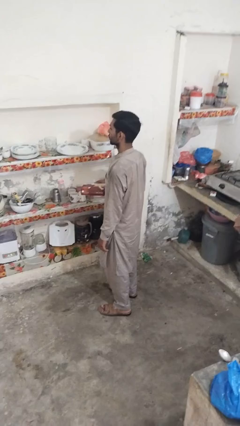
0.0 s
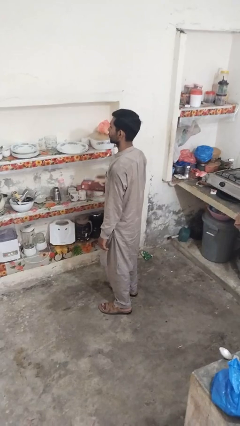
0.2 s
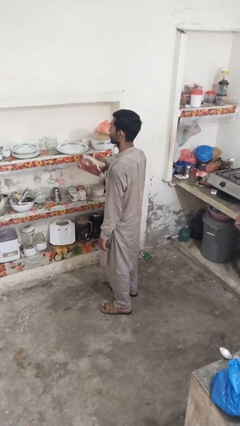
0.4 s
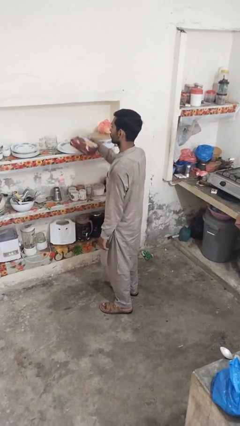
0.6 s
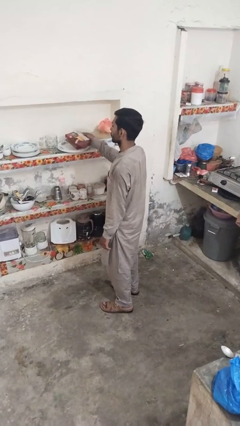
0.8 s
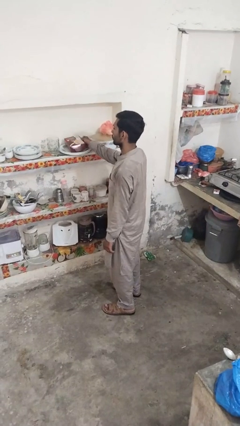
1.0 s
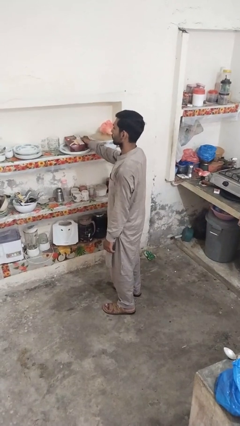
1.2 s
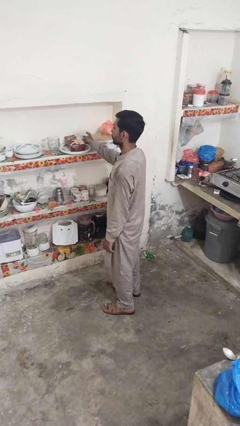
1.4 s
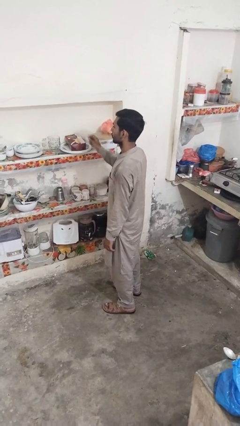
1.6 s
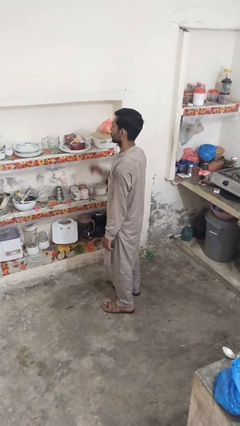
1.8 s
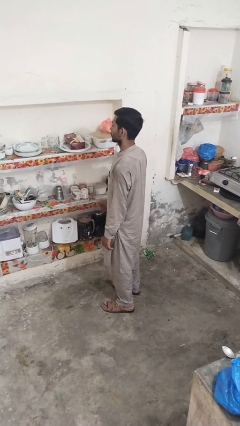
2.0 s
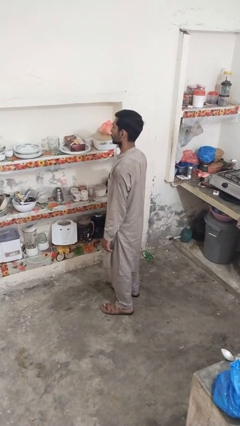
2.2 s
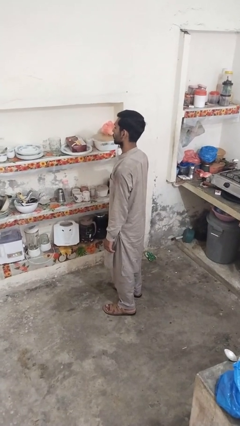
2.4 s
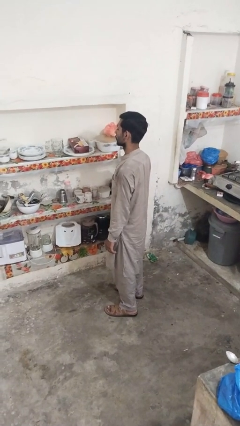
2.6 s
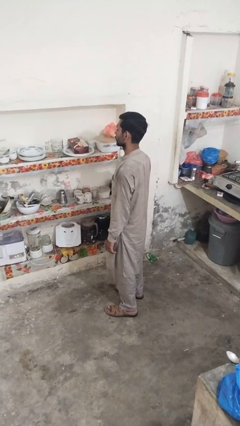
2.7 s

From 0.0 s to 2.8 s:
person puts down object into cabinet

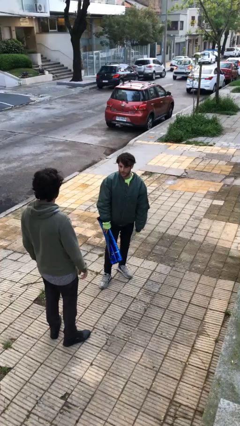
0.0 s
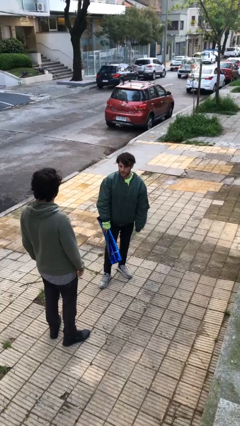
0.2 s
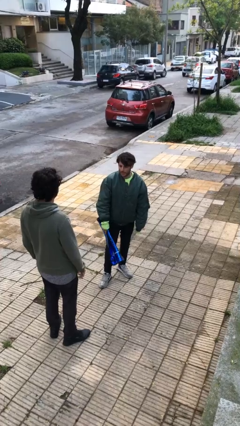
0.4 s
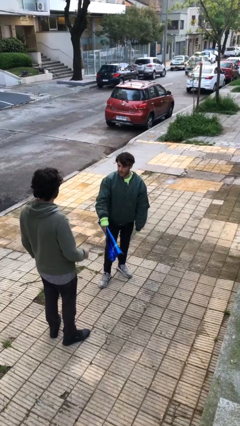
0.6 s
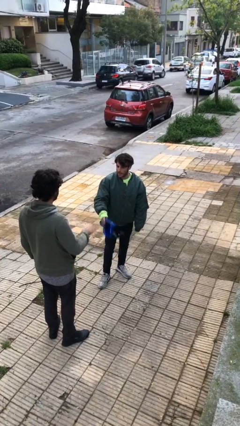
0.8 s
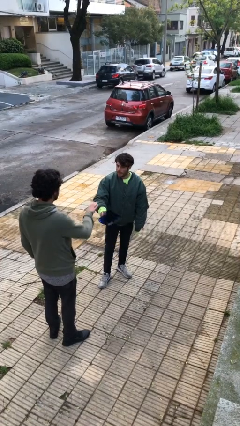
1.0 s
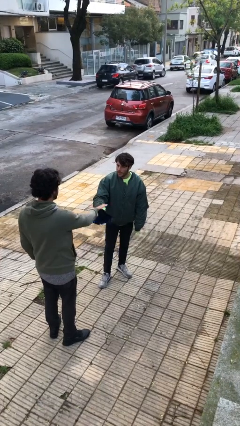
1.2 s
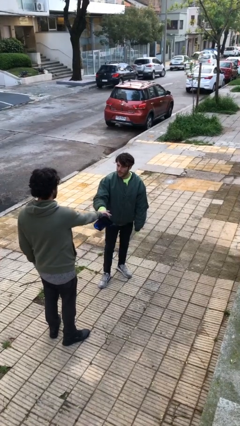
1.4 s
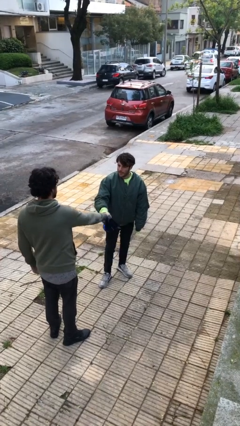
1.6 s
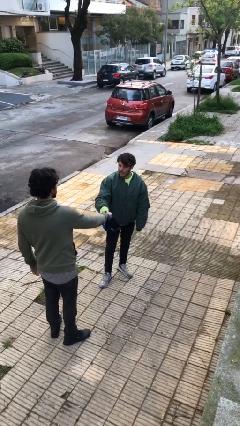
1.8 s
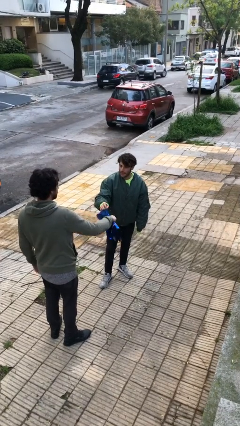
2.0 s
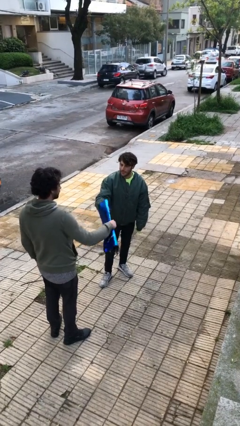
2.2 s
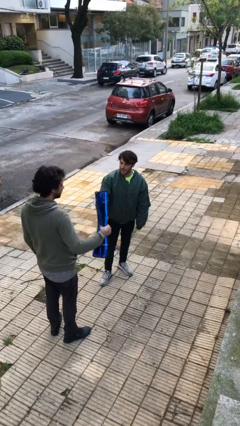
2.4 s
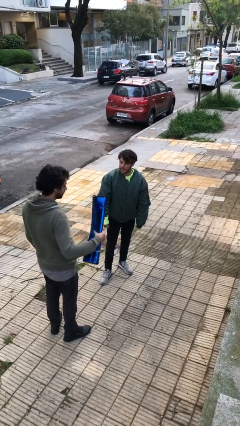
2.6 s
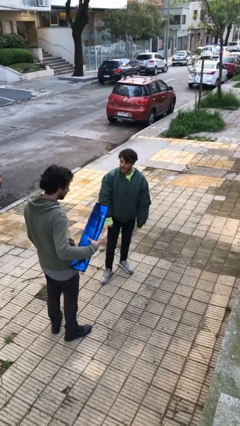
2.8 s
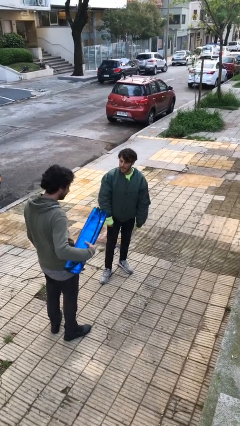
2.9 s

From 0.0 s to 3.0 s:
person transfers object to person

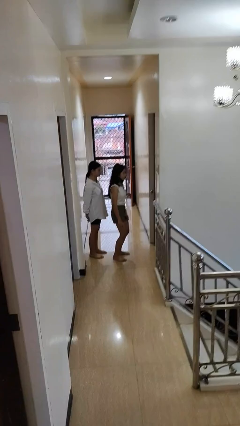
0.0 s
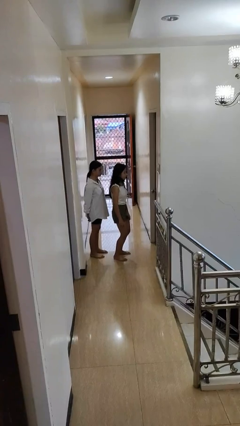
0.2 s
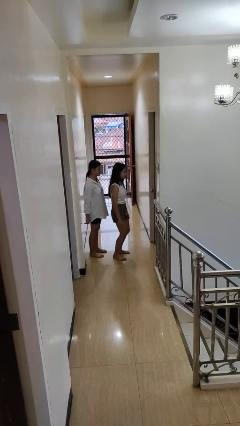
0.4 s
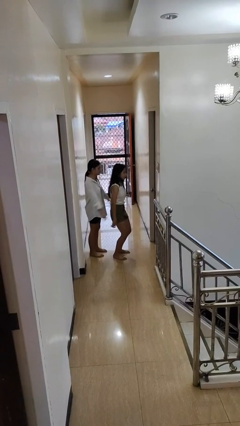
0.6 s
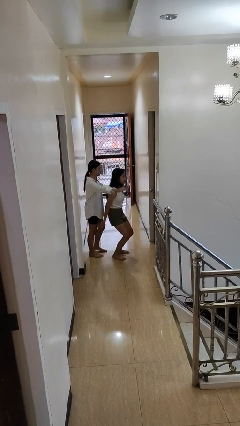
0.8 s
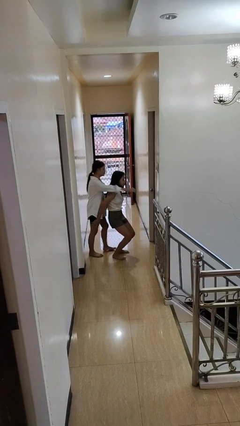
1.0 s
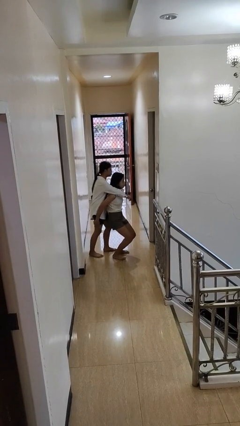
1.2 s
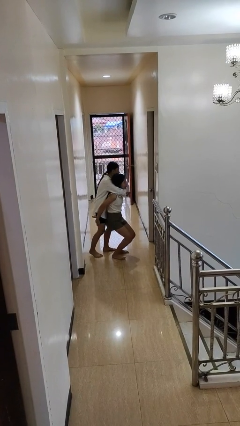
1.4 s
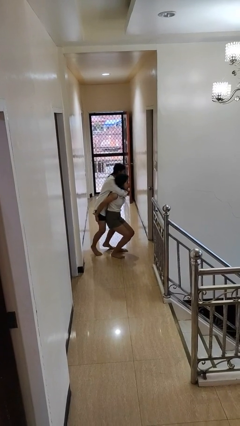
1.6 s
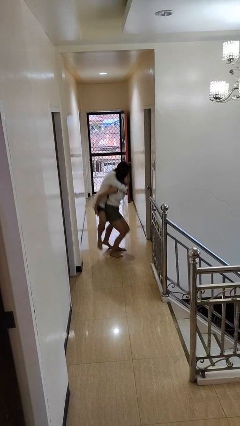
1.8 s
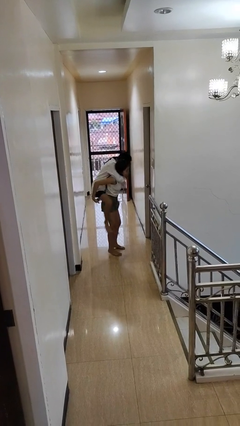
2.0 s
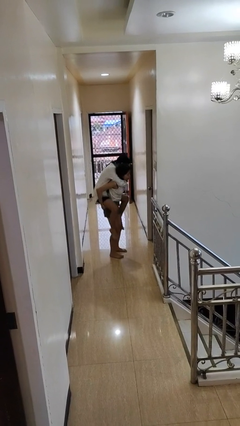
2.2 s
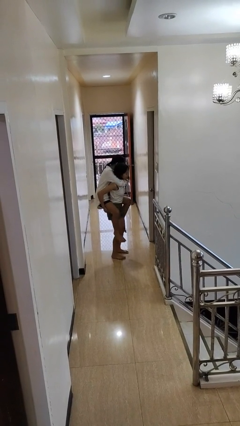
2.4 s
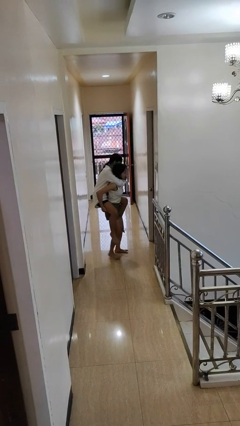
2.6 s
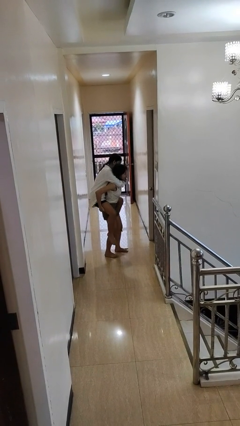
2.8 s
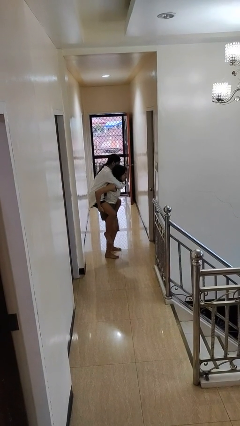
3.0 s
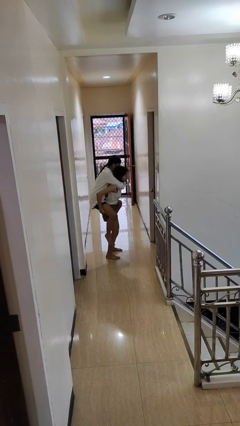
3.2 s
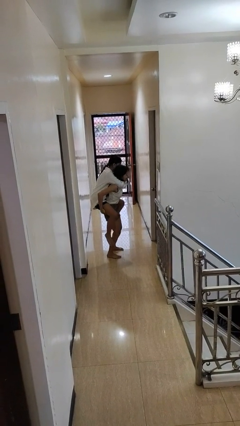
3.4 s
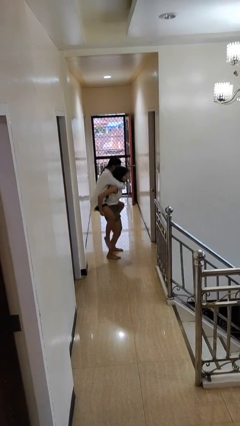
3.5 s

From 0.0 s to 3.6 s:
person carries person over shoulder

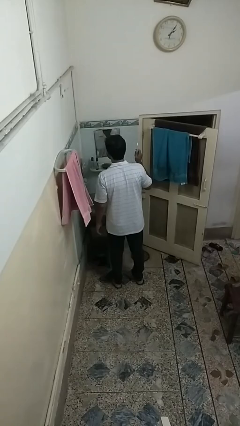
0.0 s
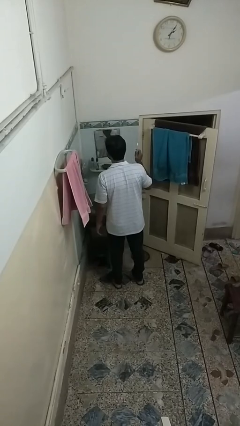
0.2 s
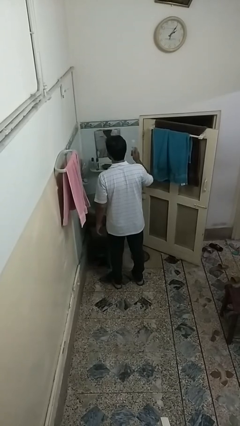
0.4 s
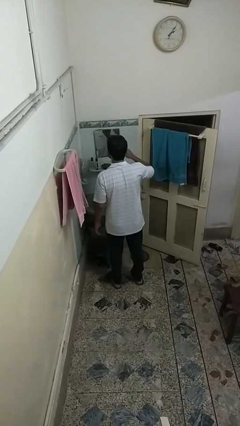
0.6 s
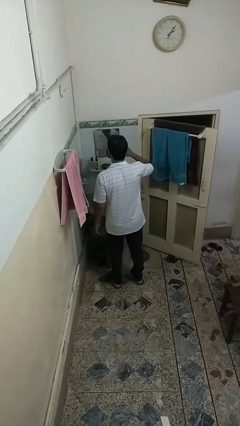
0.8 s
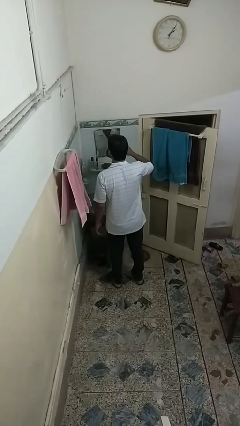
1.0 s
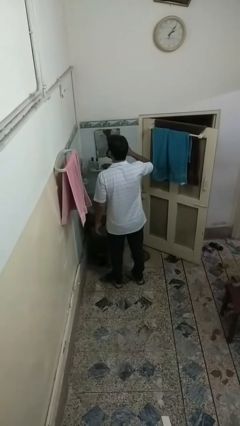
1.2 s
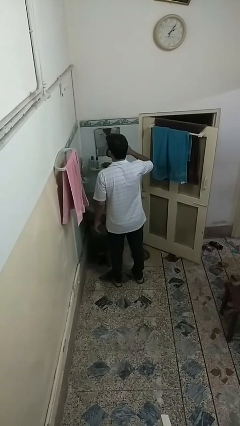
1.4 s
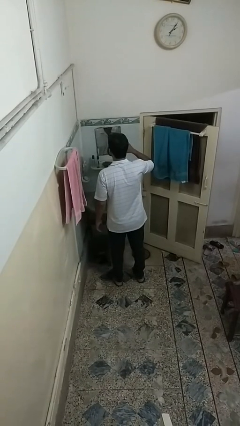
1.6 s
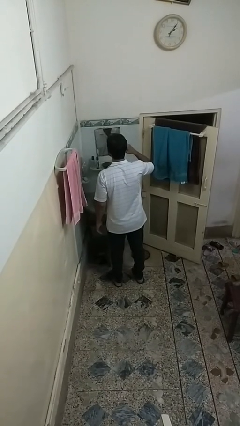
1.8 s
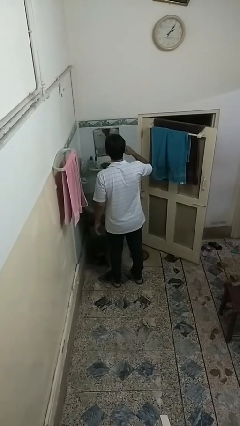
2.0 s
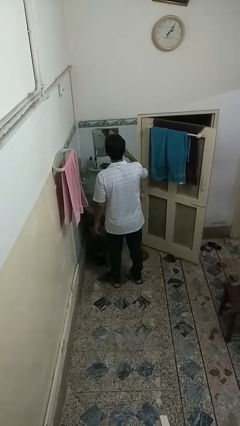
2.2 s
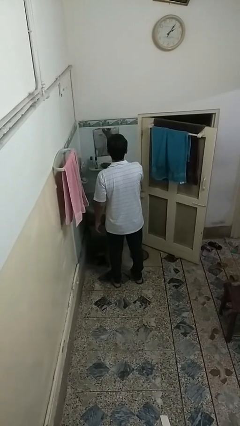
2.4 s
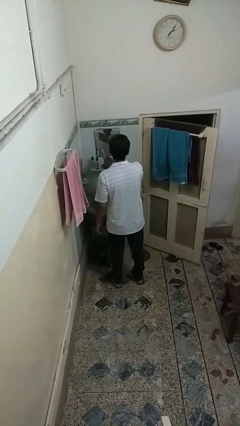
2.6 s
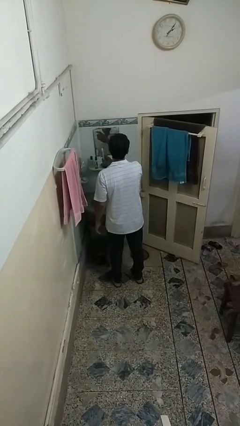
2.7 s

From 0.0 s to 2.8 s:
person brushes teeth

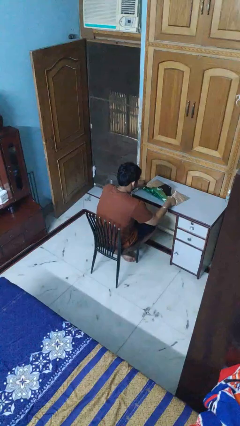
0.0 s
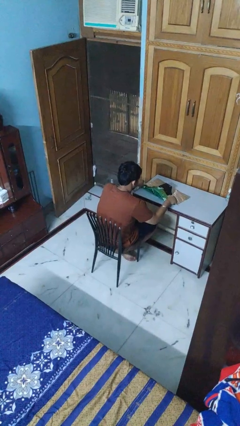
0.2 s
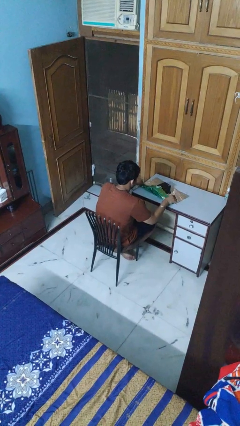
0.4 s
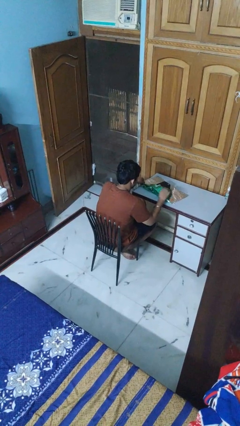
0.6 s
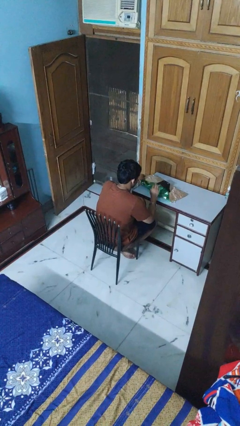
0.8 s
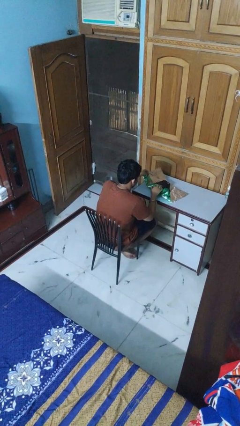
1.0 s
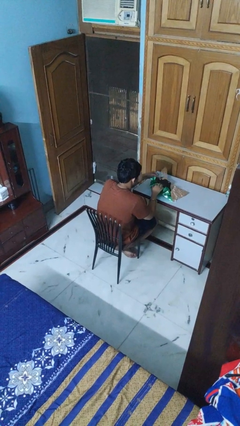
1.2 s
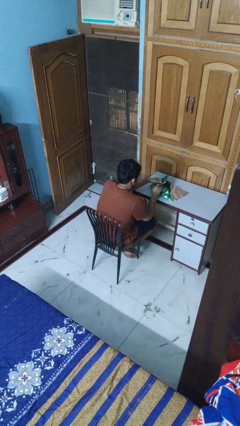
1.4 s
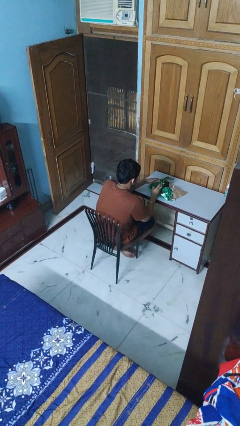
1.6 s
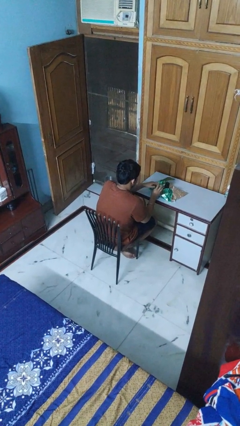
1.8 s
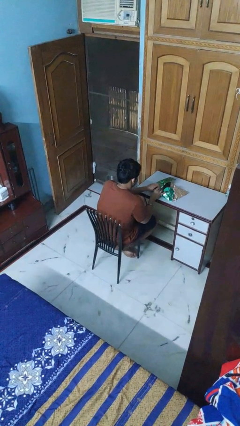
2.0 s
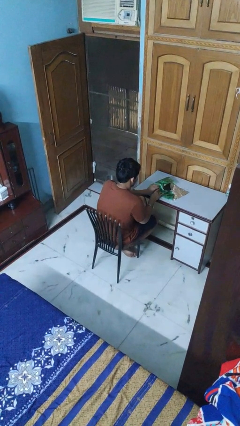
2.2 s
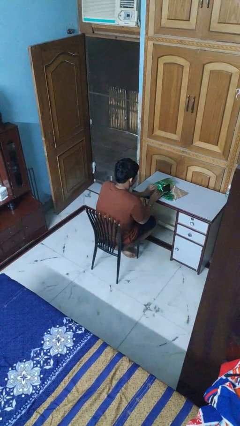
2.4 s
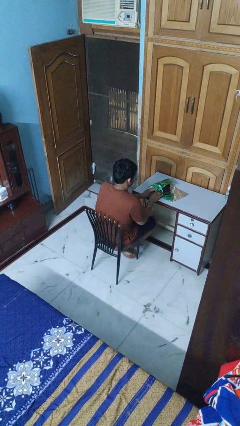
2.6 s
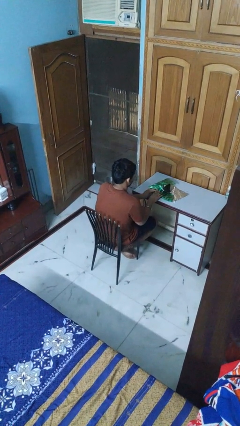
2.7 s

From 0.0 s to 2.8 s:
person wraps box

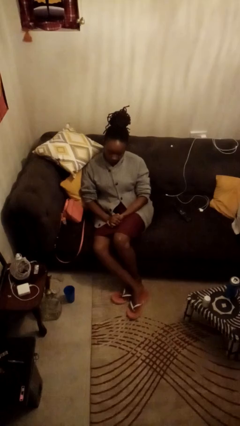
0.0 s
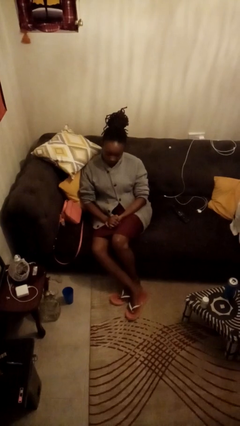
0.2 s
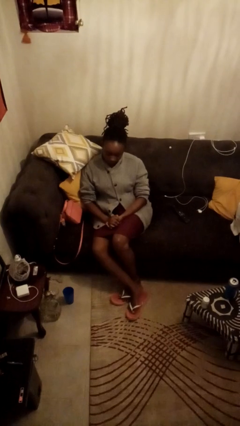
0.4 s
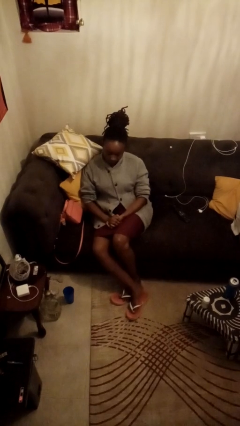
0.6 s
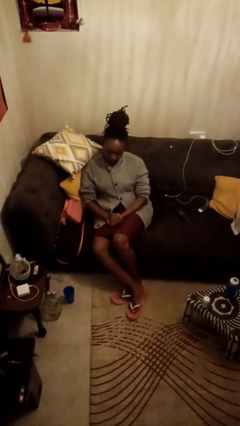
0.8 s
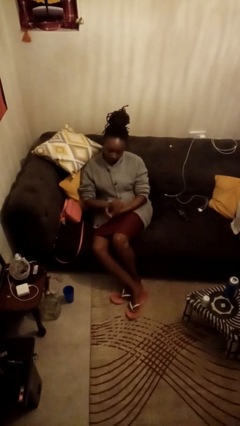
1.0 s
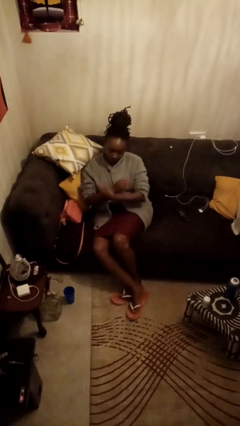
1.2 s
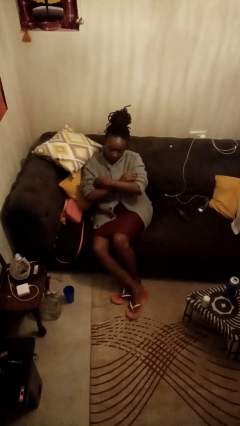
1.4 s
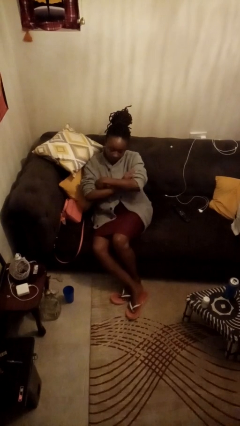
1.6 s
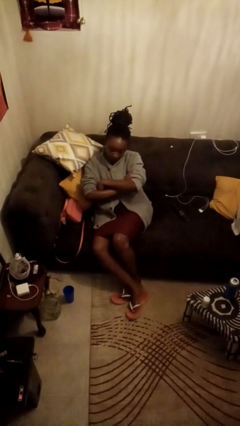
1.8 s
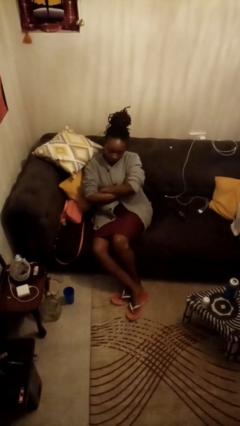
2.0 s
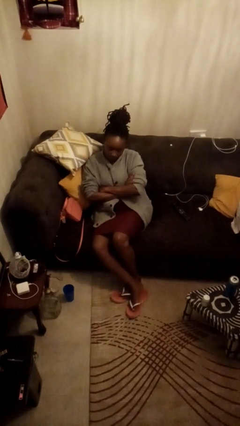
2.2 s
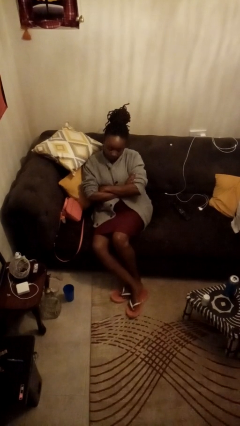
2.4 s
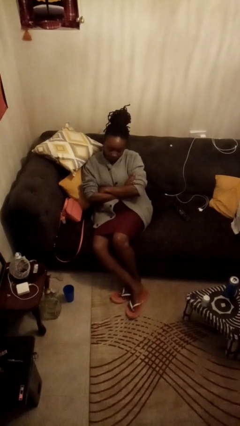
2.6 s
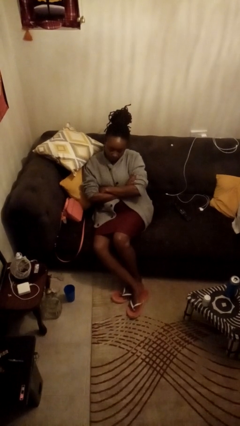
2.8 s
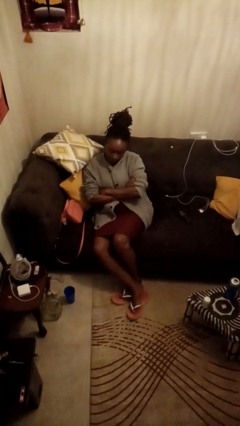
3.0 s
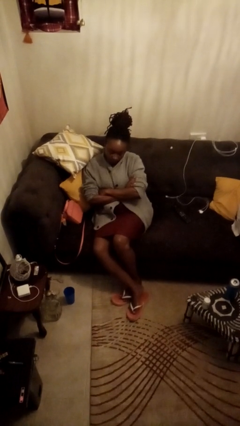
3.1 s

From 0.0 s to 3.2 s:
person crosses arms
